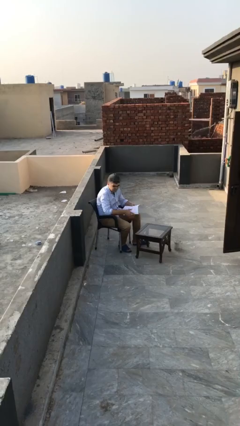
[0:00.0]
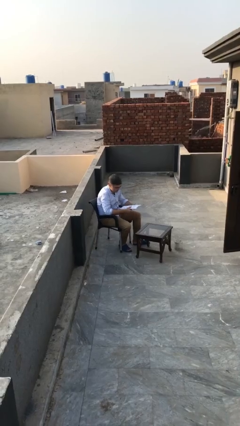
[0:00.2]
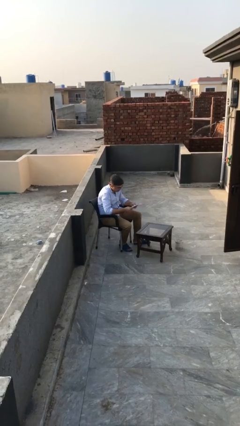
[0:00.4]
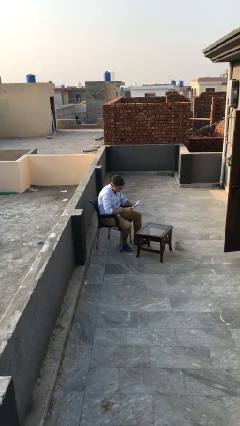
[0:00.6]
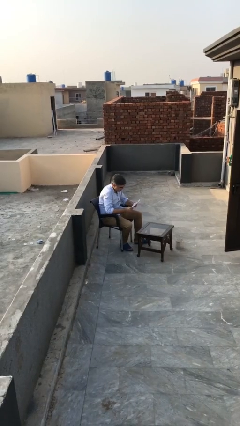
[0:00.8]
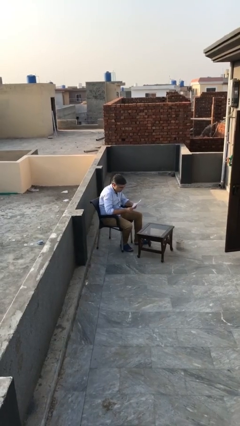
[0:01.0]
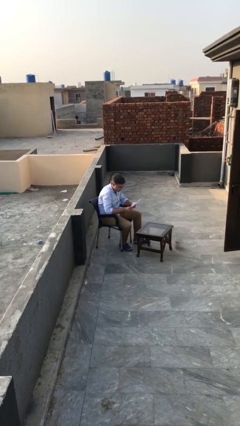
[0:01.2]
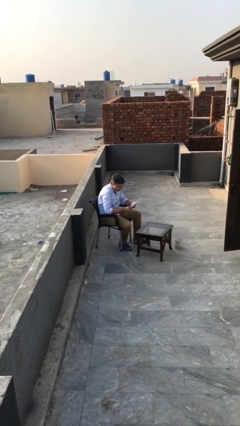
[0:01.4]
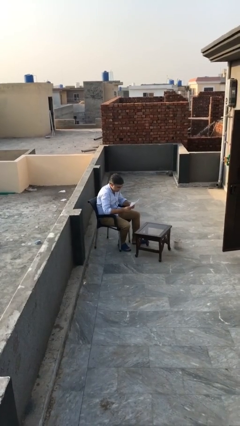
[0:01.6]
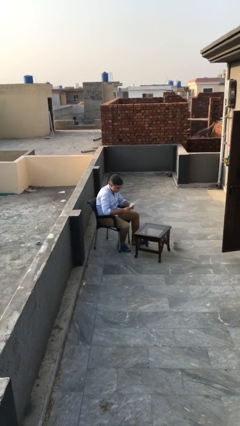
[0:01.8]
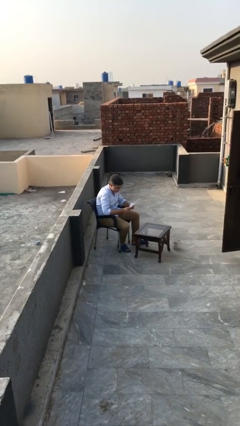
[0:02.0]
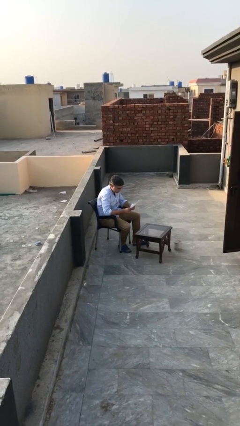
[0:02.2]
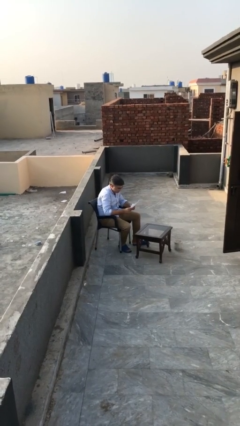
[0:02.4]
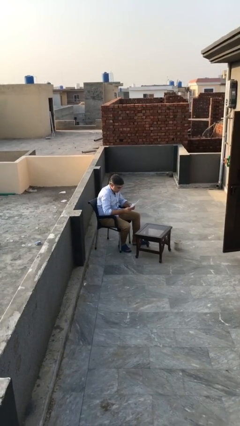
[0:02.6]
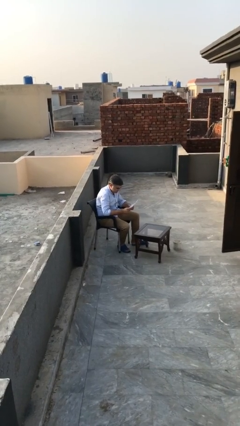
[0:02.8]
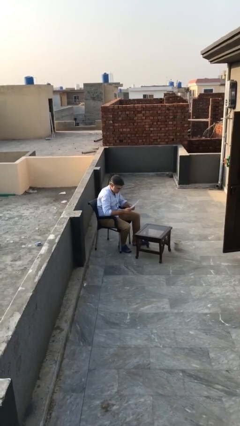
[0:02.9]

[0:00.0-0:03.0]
person reads document

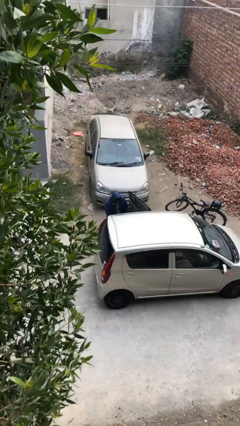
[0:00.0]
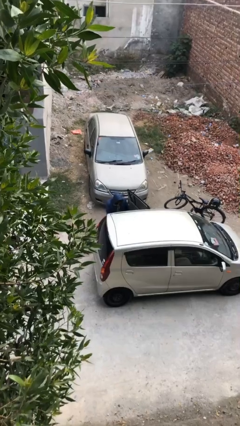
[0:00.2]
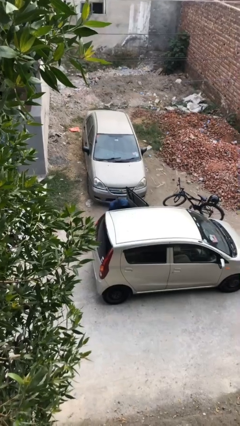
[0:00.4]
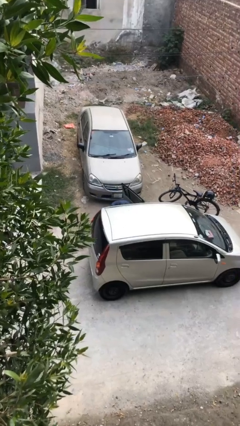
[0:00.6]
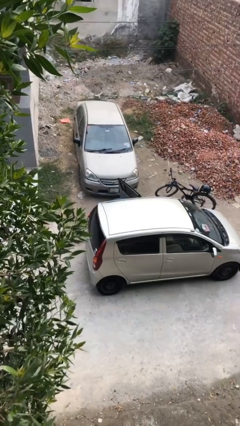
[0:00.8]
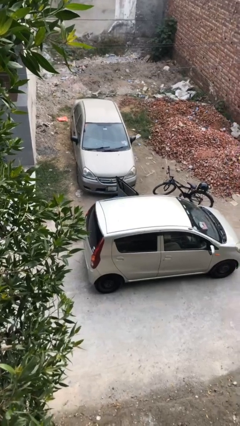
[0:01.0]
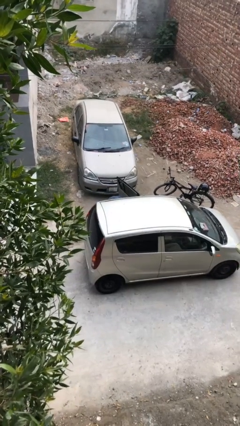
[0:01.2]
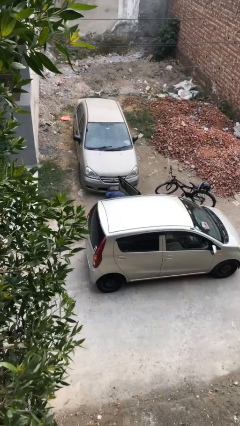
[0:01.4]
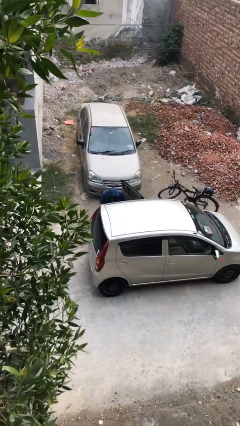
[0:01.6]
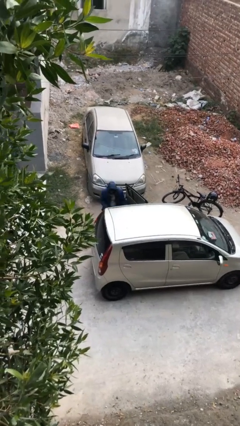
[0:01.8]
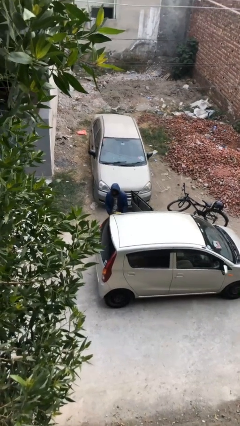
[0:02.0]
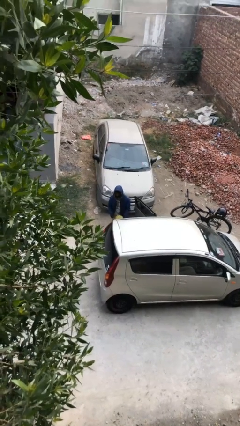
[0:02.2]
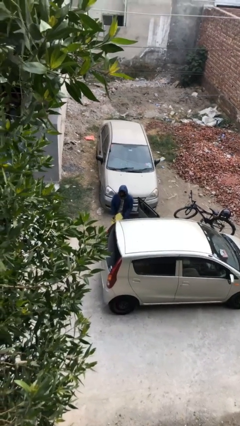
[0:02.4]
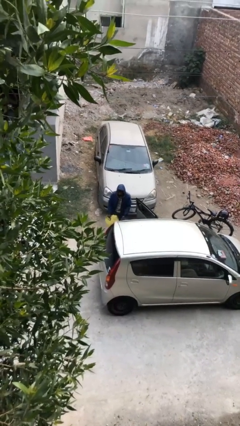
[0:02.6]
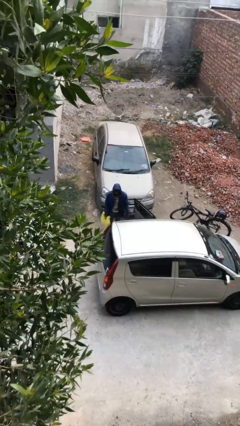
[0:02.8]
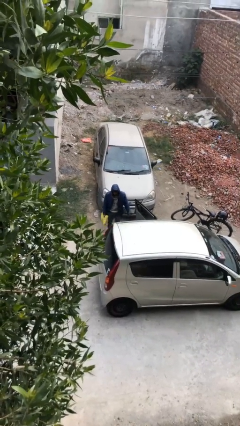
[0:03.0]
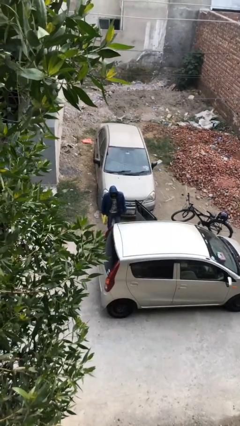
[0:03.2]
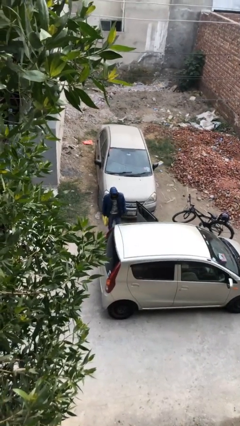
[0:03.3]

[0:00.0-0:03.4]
person unloads car

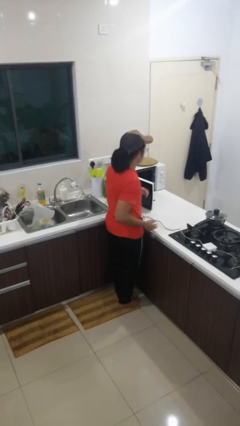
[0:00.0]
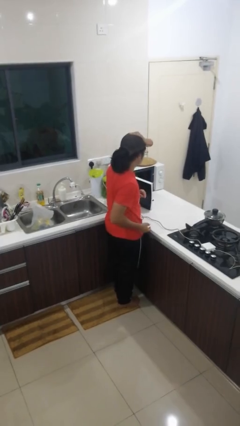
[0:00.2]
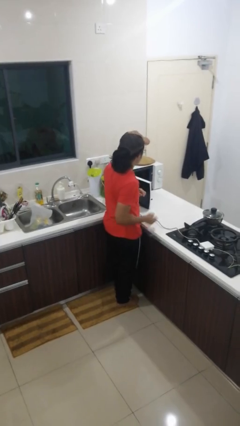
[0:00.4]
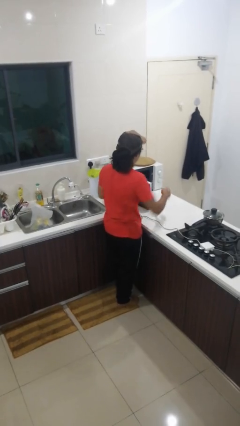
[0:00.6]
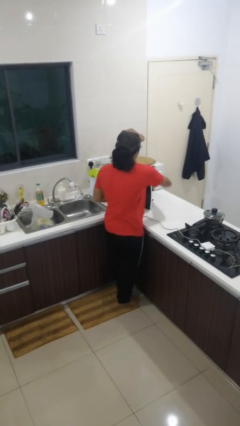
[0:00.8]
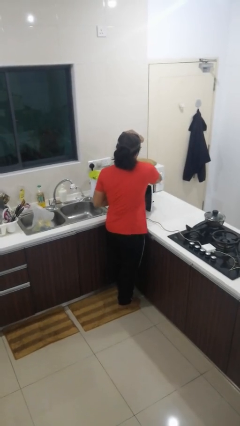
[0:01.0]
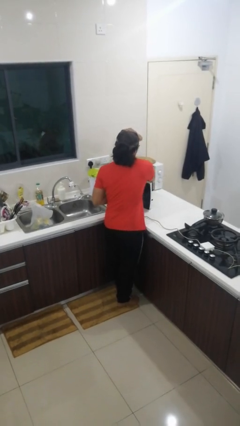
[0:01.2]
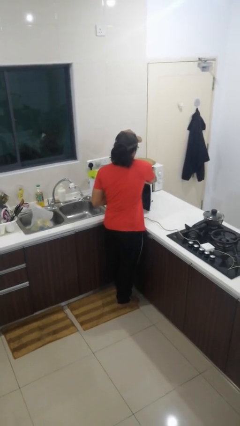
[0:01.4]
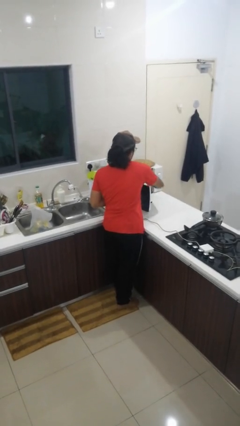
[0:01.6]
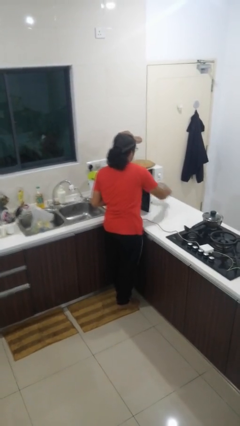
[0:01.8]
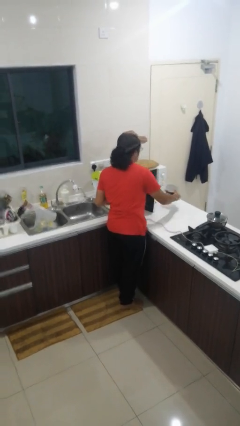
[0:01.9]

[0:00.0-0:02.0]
person takes object from microwave

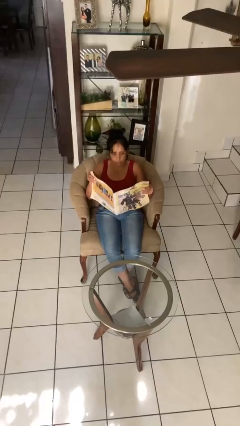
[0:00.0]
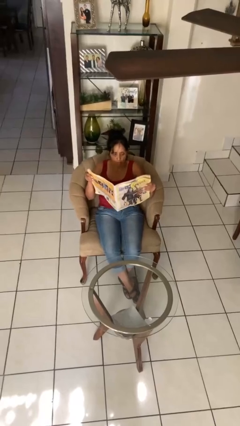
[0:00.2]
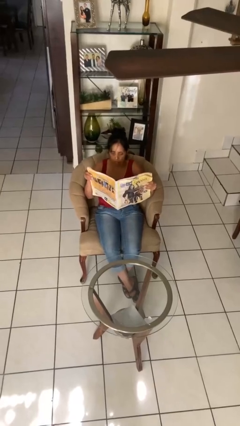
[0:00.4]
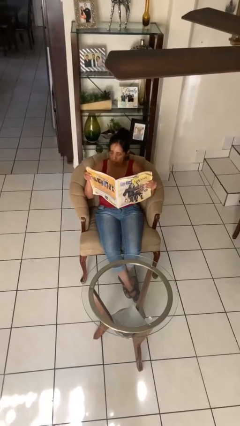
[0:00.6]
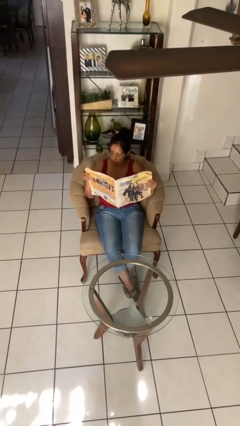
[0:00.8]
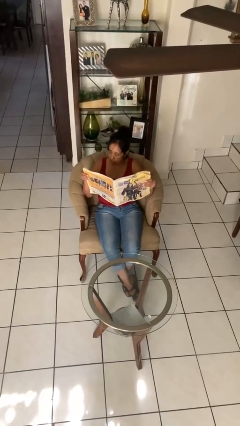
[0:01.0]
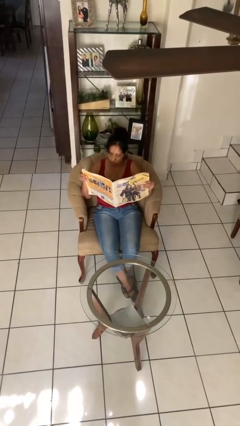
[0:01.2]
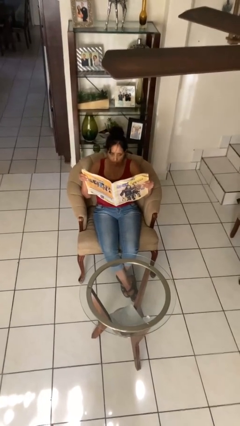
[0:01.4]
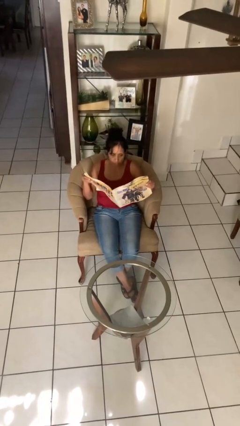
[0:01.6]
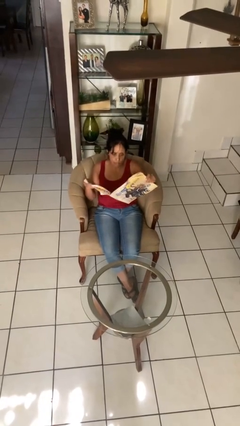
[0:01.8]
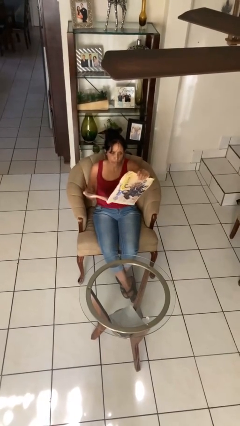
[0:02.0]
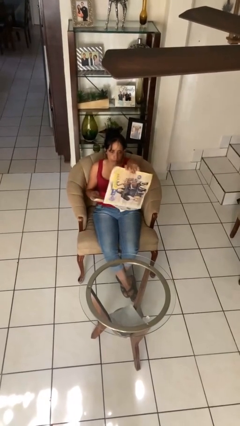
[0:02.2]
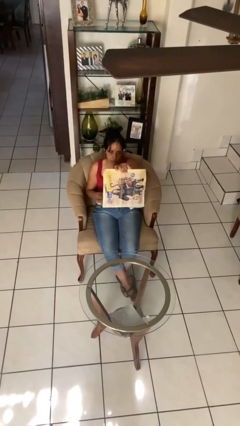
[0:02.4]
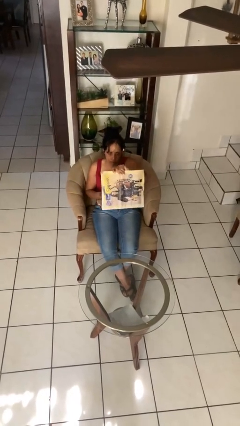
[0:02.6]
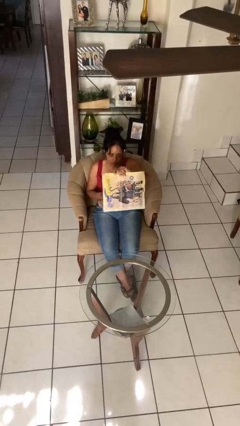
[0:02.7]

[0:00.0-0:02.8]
person reads newspaper

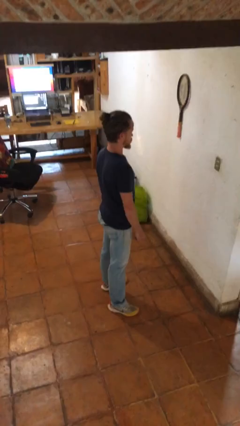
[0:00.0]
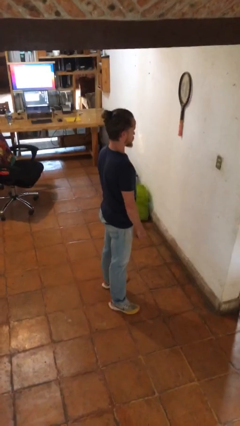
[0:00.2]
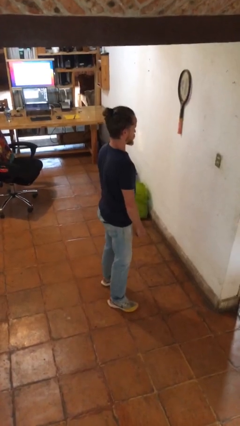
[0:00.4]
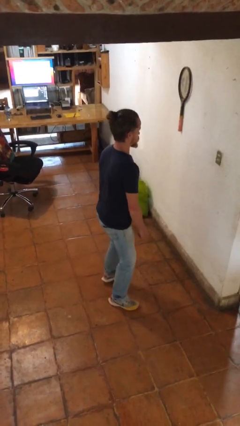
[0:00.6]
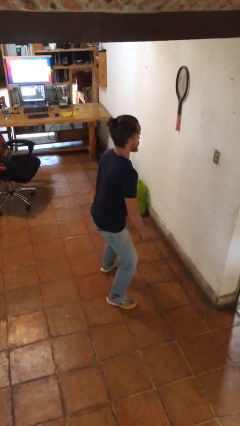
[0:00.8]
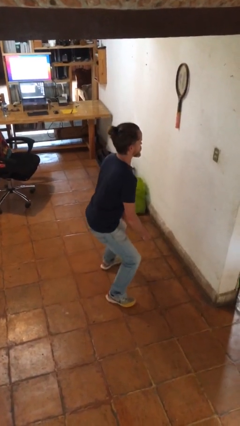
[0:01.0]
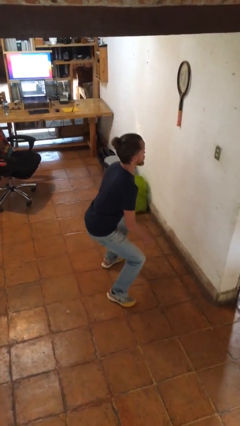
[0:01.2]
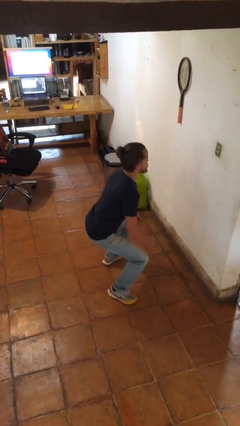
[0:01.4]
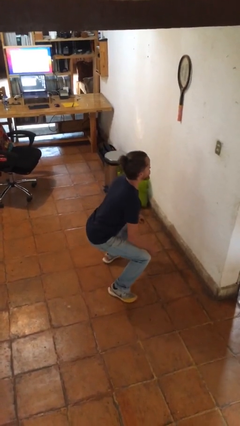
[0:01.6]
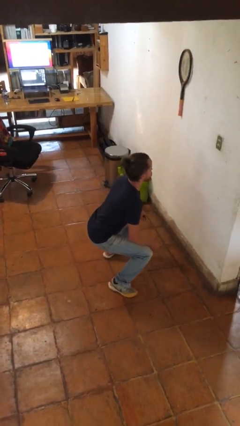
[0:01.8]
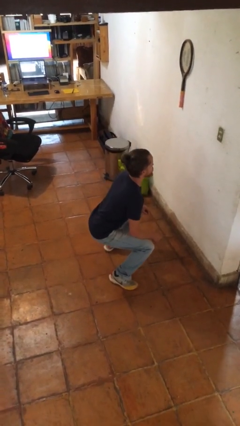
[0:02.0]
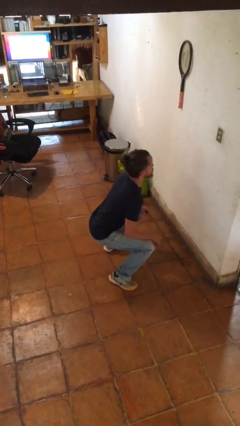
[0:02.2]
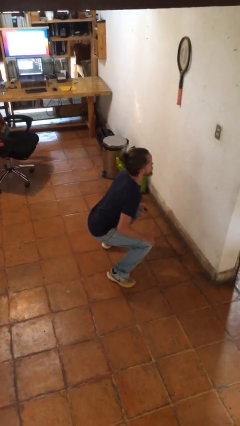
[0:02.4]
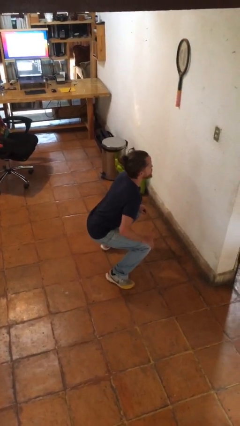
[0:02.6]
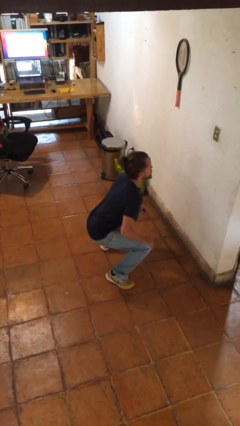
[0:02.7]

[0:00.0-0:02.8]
person squats

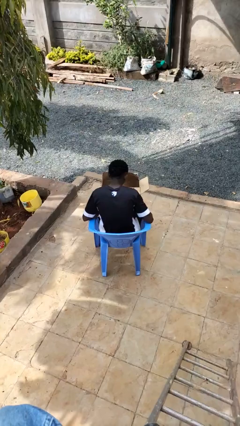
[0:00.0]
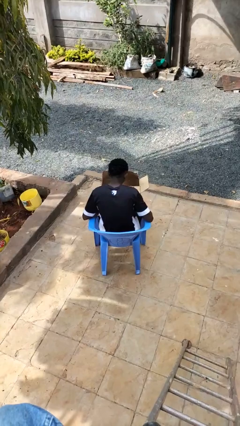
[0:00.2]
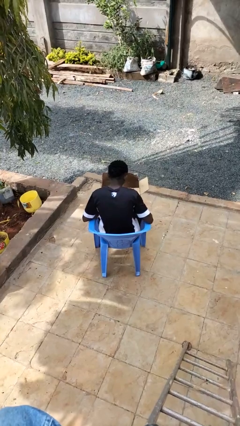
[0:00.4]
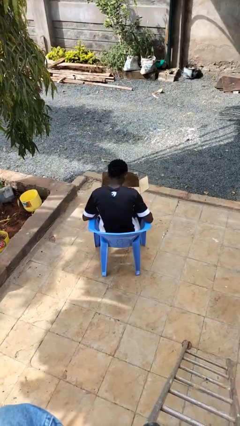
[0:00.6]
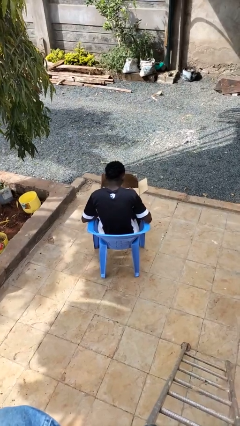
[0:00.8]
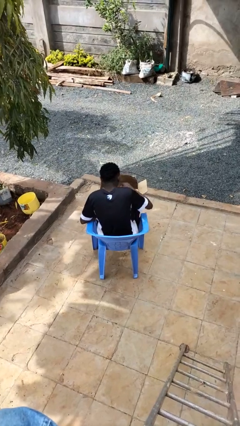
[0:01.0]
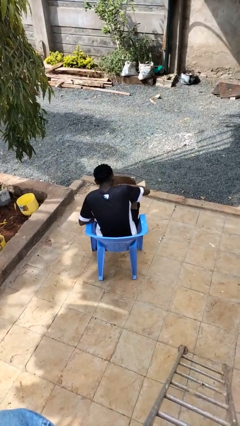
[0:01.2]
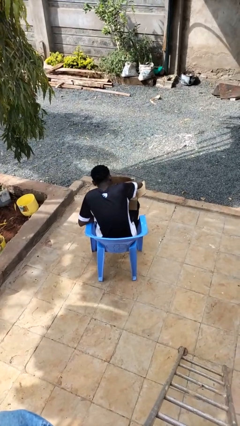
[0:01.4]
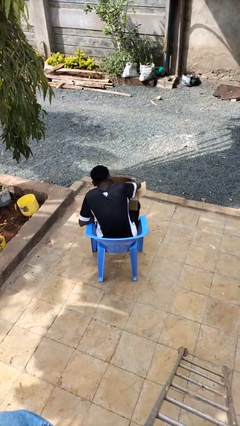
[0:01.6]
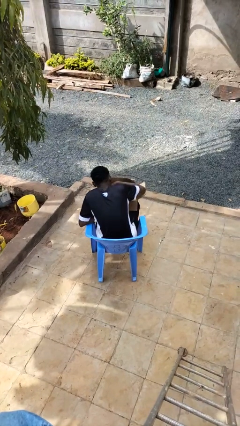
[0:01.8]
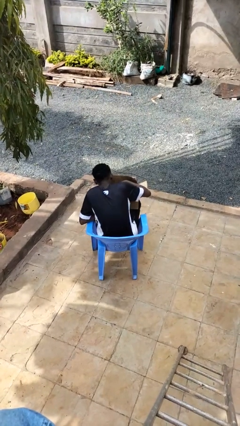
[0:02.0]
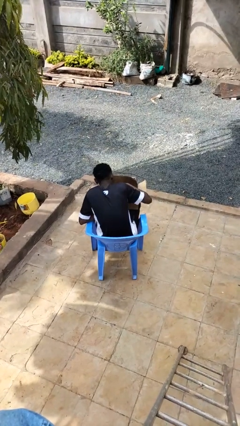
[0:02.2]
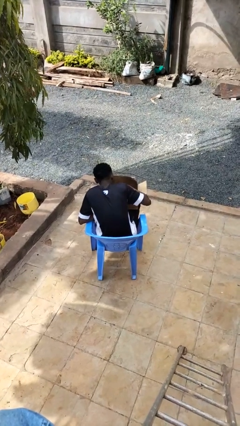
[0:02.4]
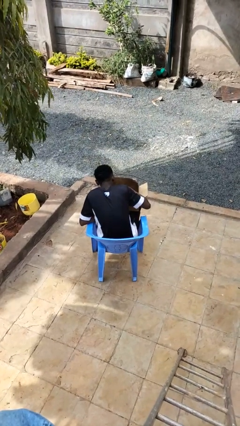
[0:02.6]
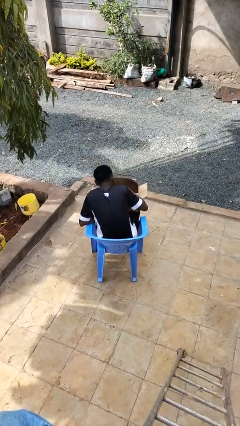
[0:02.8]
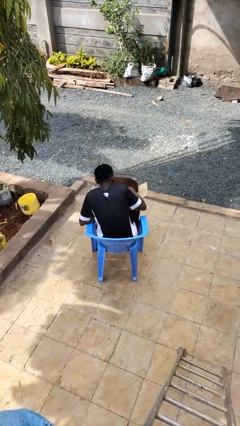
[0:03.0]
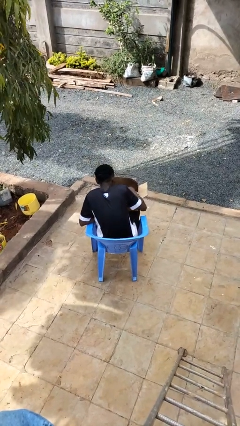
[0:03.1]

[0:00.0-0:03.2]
person searches in box

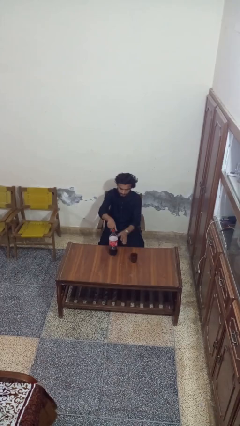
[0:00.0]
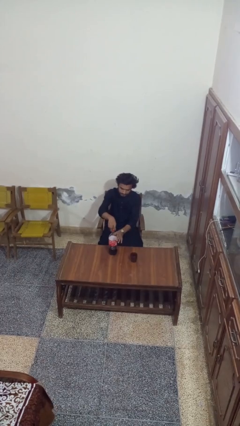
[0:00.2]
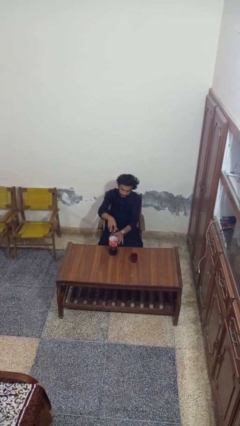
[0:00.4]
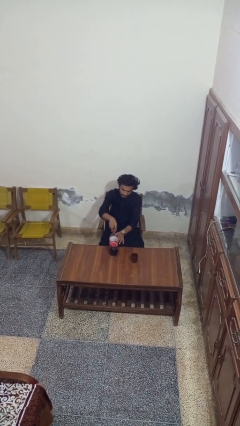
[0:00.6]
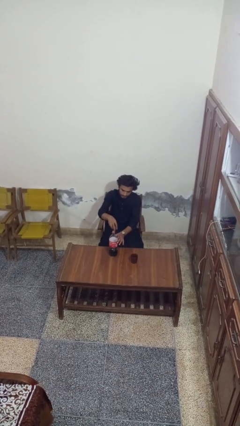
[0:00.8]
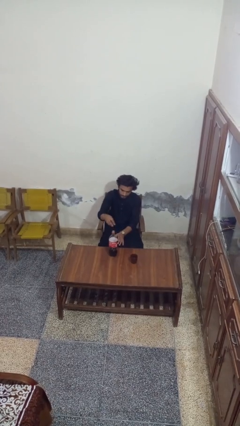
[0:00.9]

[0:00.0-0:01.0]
person unscrews lid from bottle
